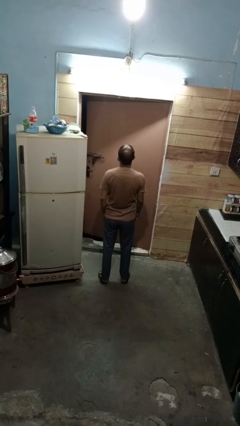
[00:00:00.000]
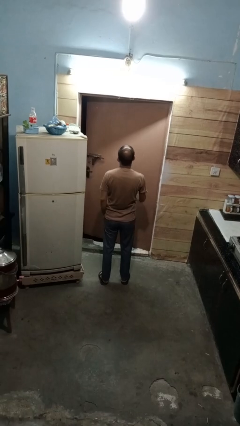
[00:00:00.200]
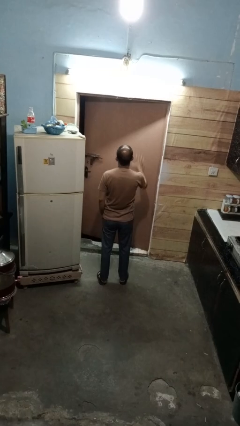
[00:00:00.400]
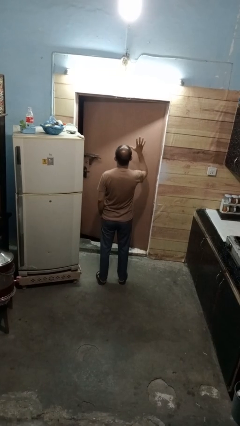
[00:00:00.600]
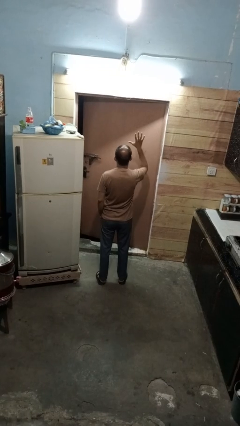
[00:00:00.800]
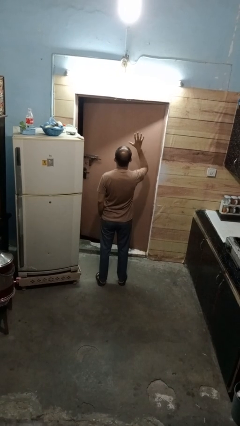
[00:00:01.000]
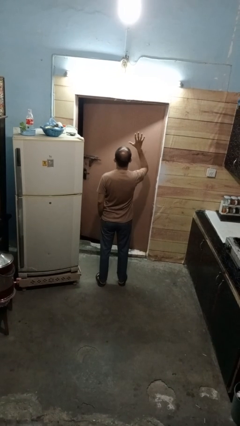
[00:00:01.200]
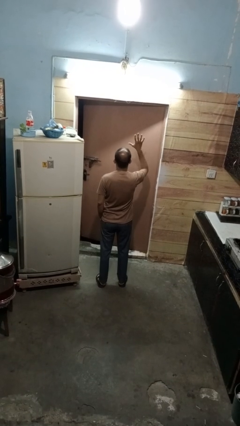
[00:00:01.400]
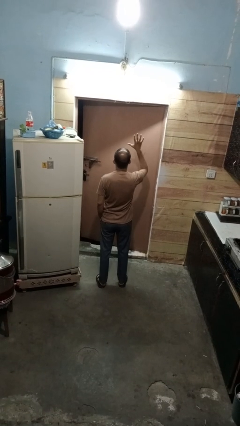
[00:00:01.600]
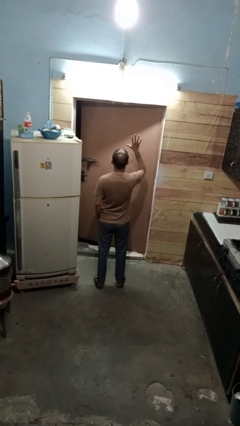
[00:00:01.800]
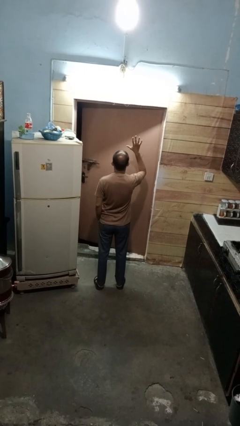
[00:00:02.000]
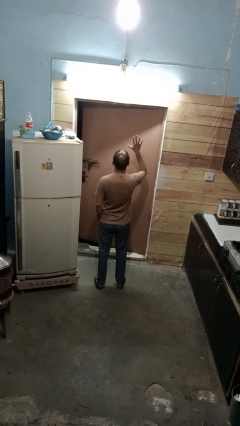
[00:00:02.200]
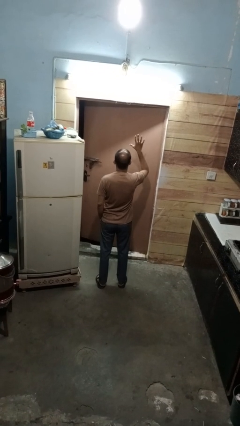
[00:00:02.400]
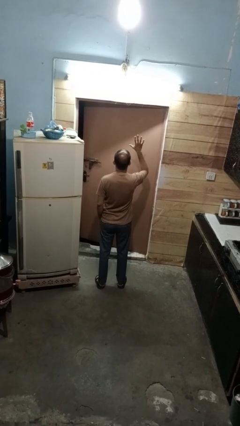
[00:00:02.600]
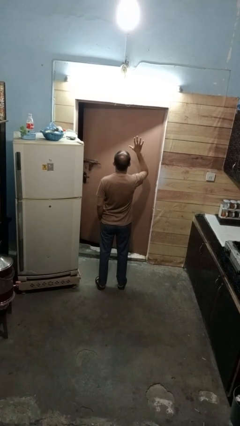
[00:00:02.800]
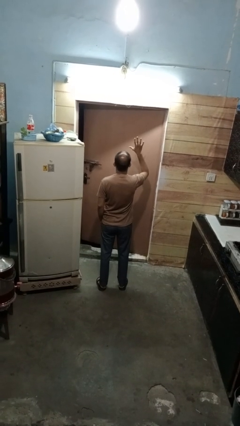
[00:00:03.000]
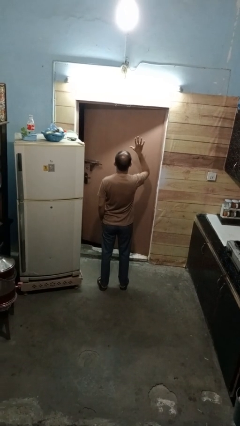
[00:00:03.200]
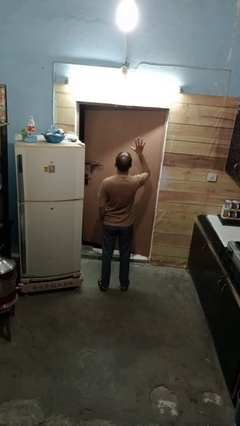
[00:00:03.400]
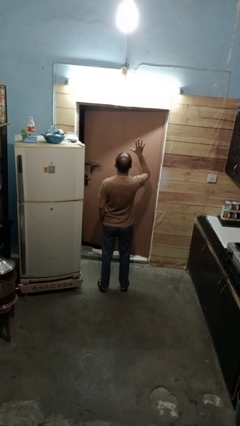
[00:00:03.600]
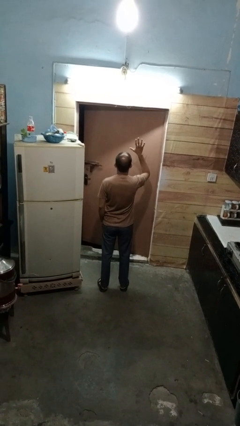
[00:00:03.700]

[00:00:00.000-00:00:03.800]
person gestures number five

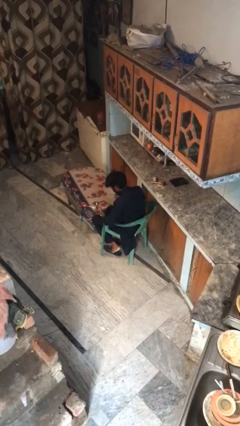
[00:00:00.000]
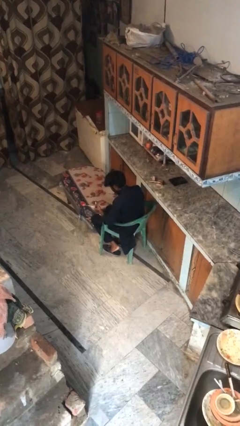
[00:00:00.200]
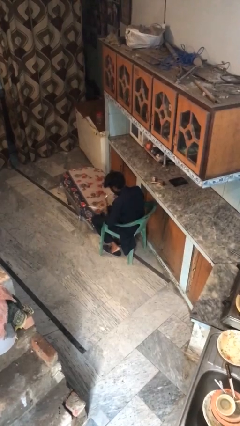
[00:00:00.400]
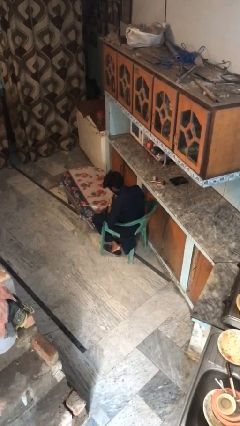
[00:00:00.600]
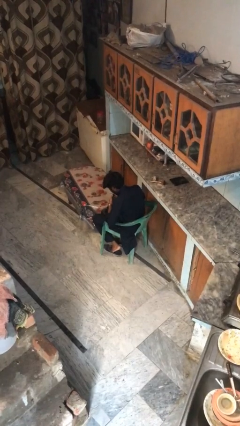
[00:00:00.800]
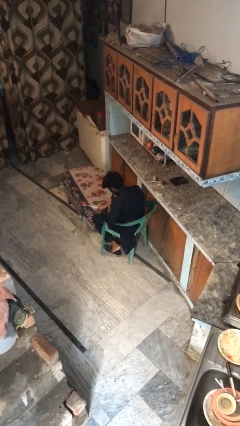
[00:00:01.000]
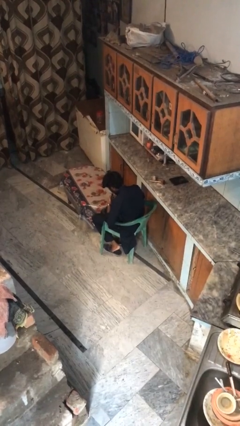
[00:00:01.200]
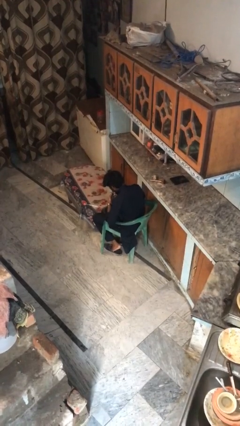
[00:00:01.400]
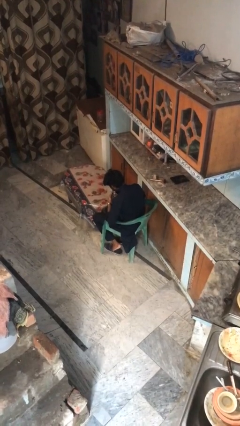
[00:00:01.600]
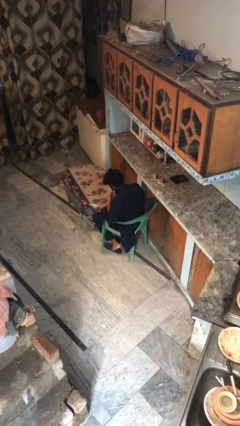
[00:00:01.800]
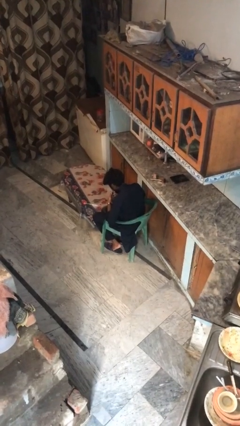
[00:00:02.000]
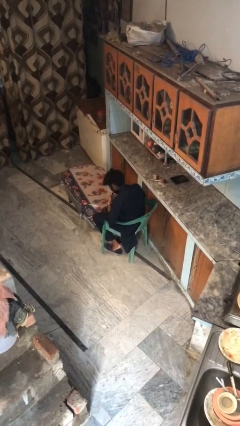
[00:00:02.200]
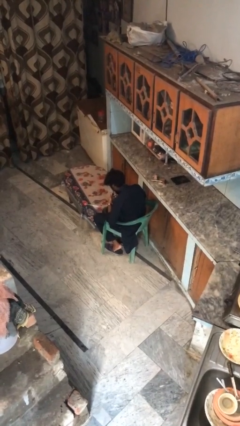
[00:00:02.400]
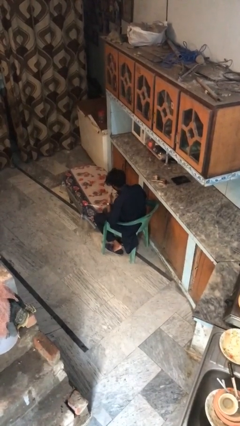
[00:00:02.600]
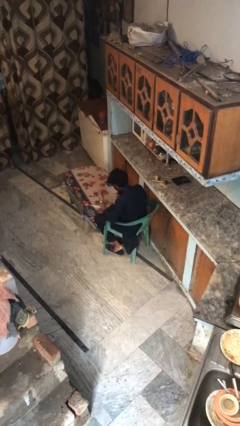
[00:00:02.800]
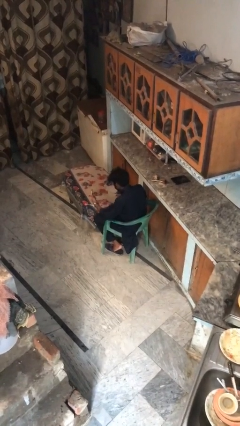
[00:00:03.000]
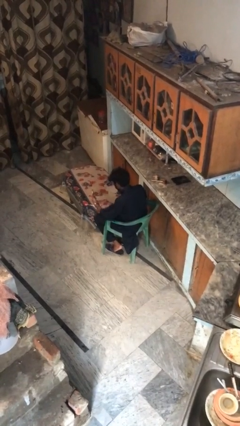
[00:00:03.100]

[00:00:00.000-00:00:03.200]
person applies lip makeup

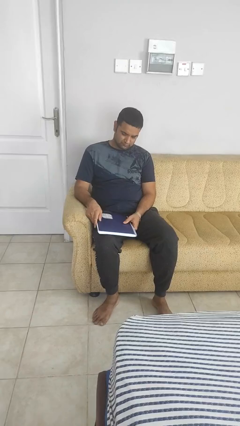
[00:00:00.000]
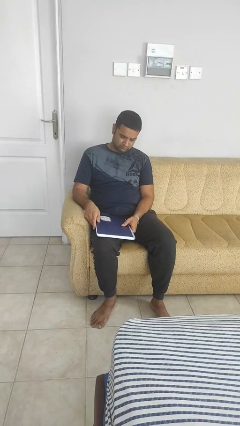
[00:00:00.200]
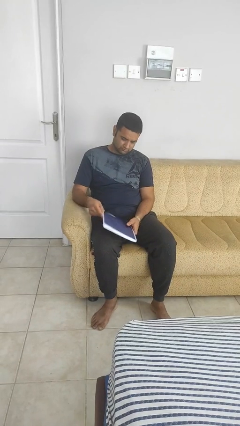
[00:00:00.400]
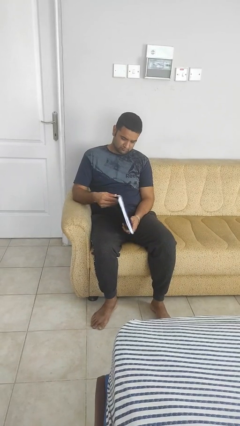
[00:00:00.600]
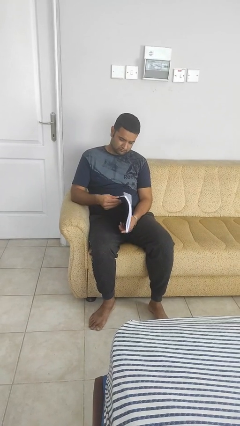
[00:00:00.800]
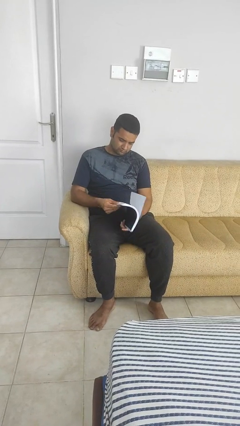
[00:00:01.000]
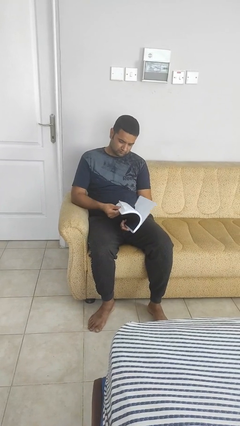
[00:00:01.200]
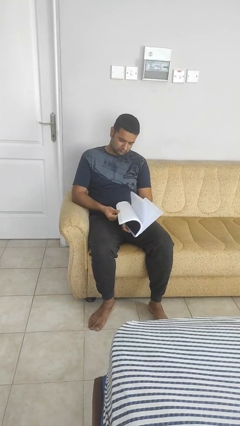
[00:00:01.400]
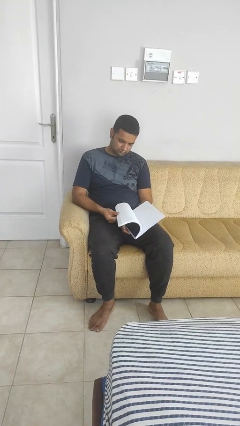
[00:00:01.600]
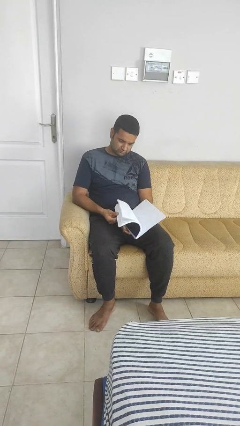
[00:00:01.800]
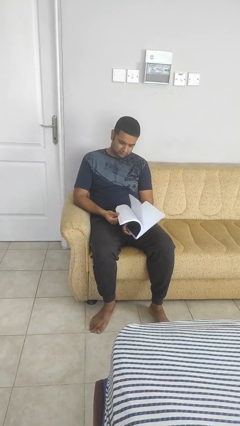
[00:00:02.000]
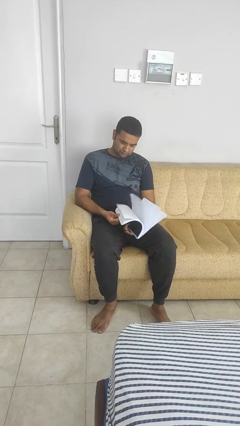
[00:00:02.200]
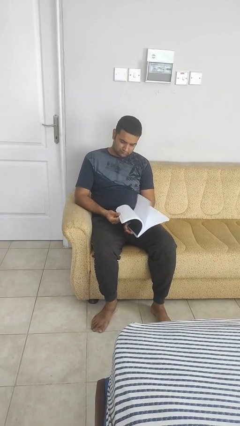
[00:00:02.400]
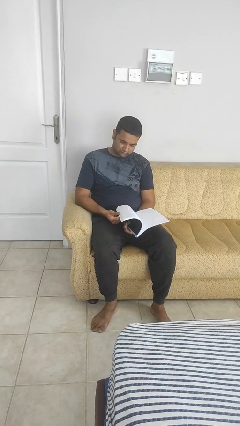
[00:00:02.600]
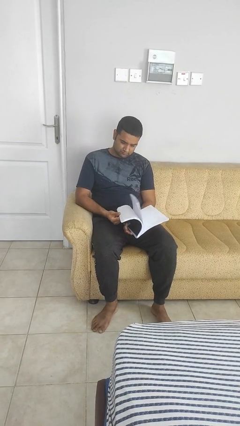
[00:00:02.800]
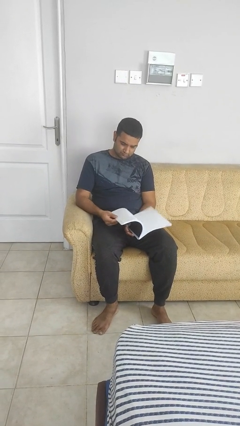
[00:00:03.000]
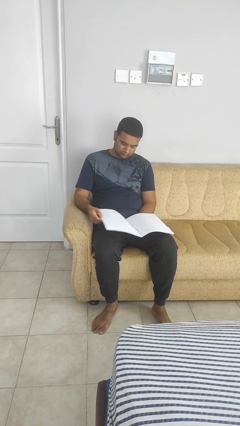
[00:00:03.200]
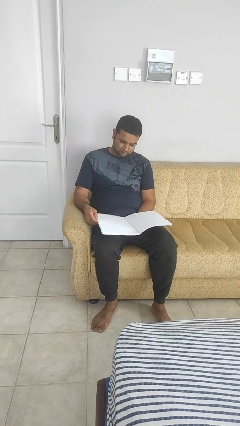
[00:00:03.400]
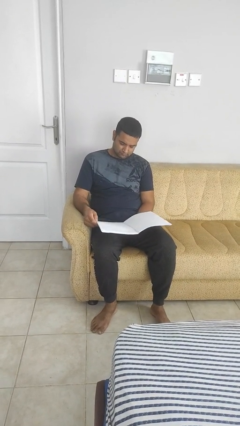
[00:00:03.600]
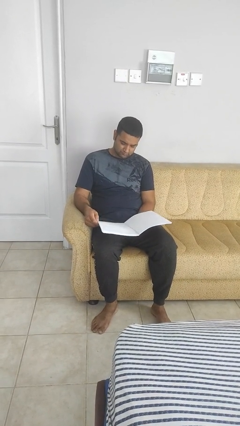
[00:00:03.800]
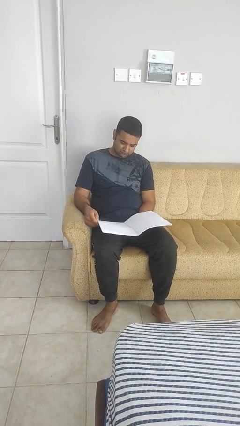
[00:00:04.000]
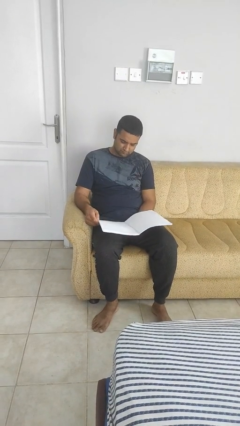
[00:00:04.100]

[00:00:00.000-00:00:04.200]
person reads book

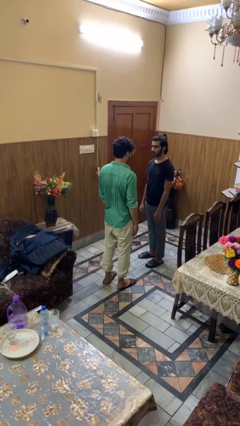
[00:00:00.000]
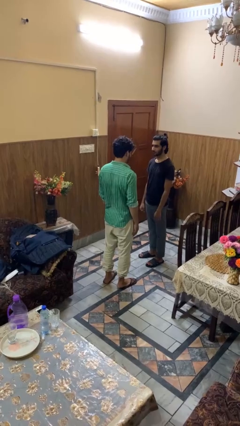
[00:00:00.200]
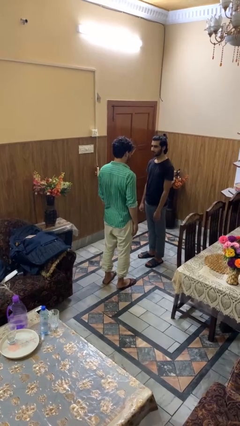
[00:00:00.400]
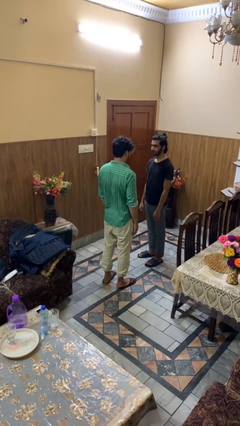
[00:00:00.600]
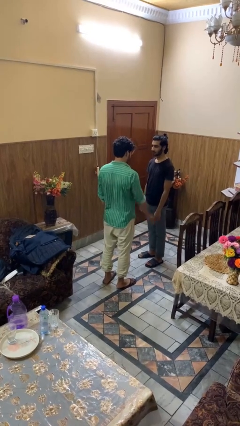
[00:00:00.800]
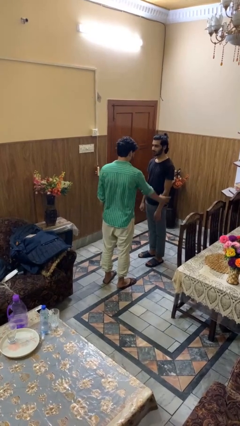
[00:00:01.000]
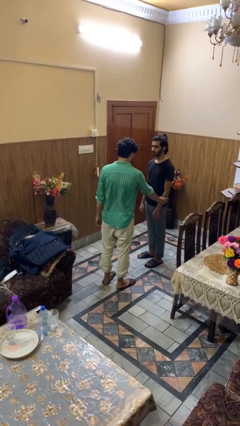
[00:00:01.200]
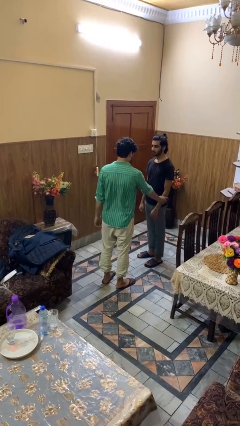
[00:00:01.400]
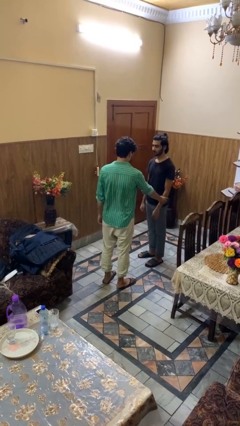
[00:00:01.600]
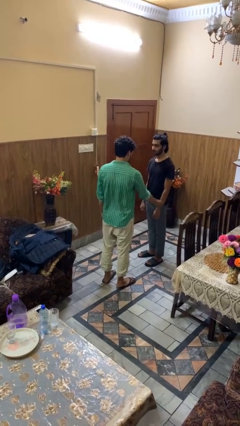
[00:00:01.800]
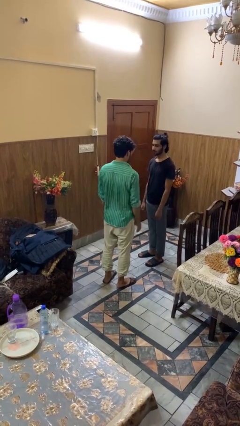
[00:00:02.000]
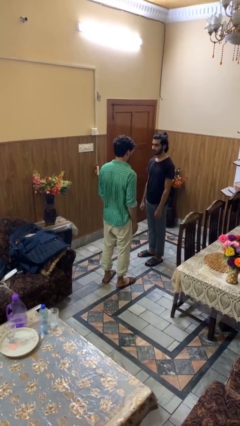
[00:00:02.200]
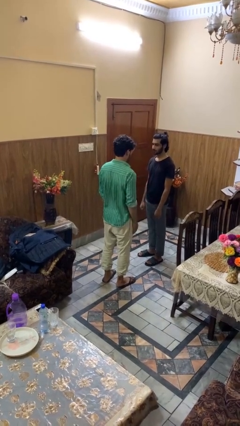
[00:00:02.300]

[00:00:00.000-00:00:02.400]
person grabs person by forearm

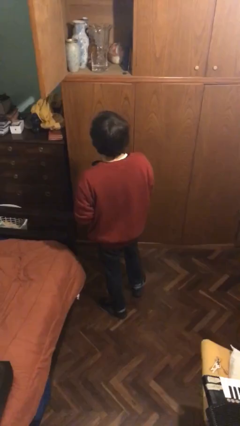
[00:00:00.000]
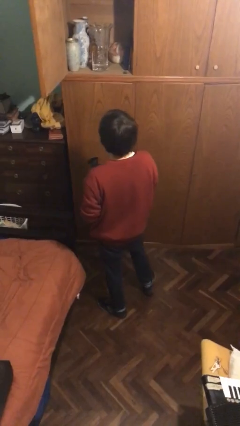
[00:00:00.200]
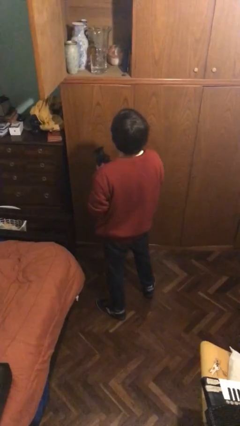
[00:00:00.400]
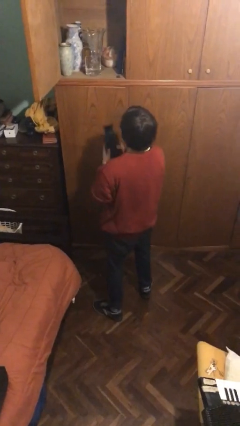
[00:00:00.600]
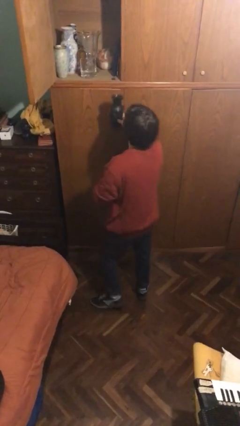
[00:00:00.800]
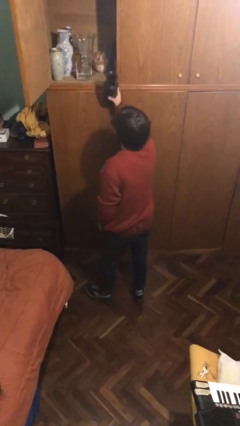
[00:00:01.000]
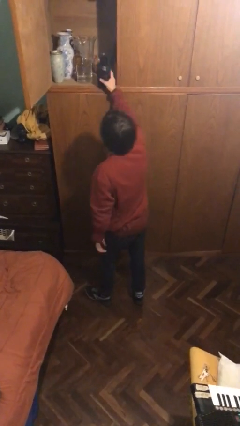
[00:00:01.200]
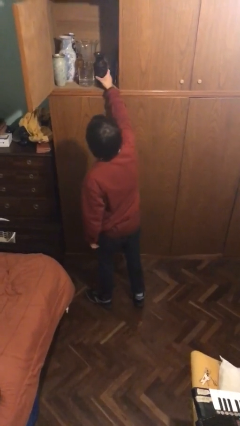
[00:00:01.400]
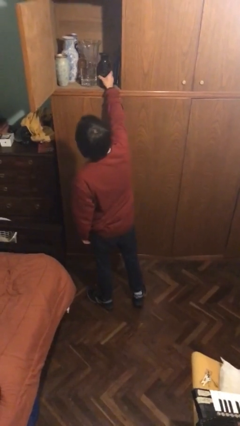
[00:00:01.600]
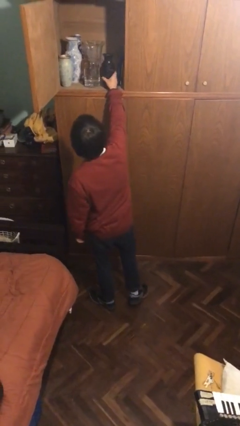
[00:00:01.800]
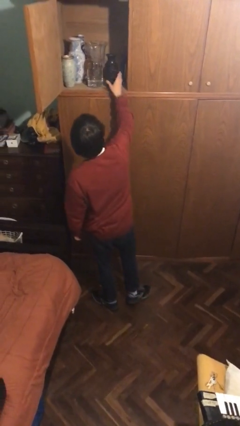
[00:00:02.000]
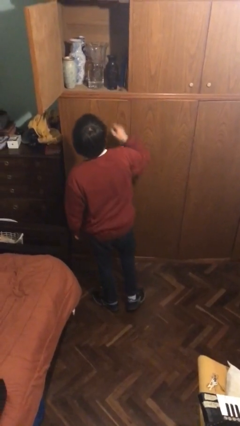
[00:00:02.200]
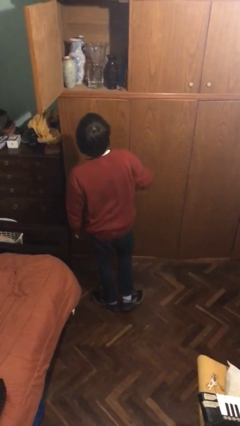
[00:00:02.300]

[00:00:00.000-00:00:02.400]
person puts down object into cabinet

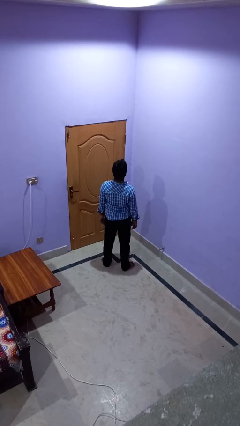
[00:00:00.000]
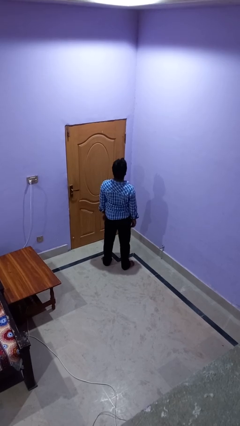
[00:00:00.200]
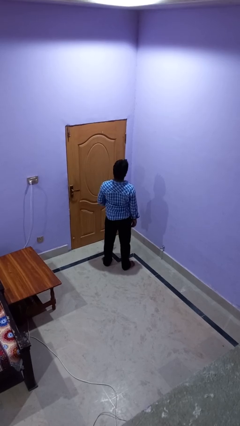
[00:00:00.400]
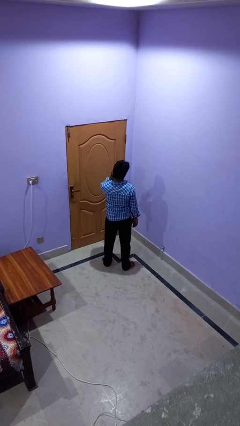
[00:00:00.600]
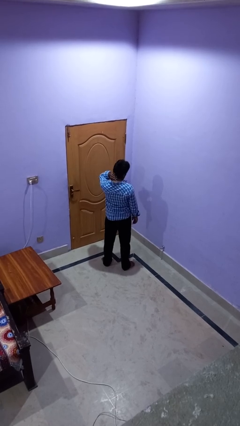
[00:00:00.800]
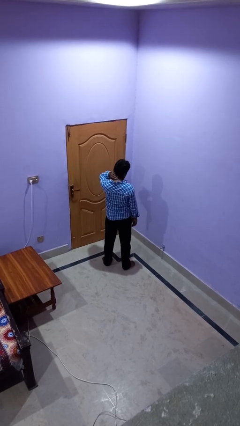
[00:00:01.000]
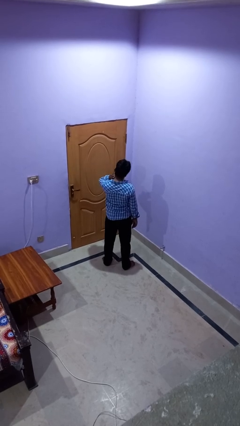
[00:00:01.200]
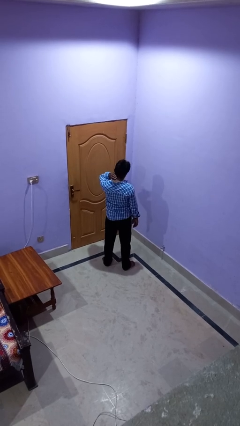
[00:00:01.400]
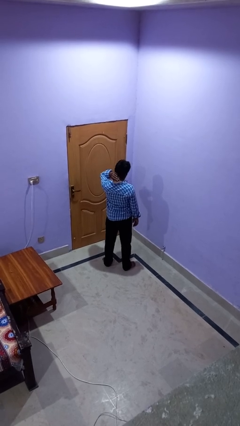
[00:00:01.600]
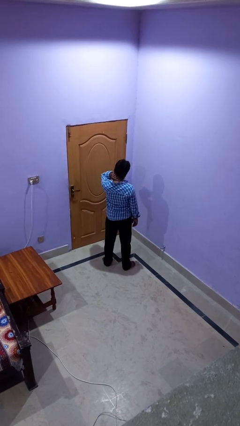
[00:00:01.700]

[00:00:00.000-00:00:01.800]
person rubs neck
